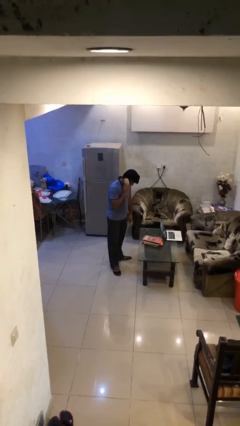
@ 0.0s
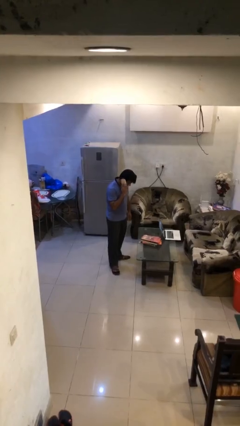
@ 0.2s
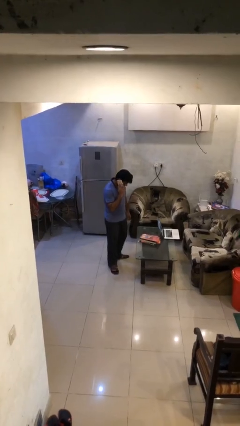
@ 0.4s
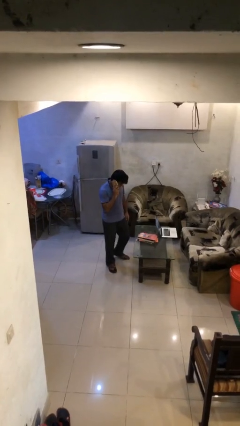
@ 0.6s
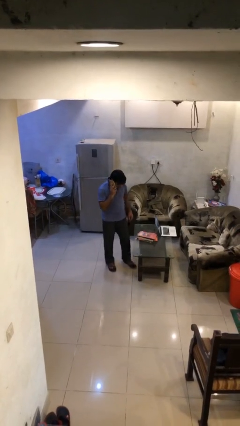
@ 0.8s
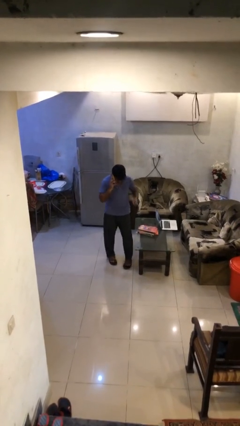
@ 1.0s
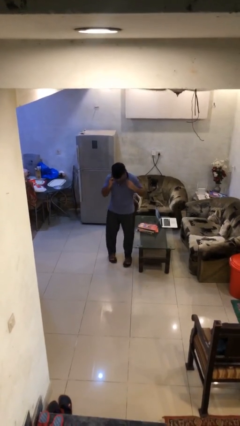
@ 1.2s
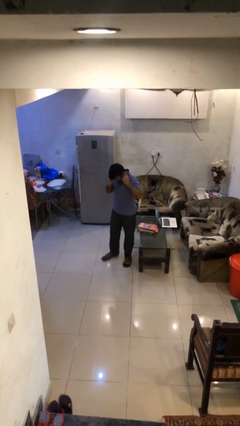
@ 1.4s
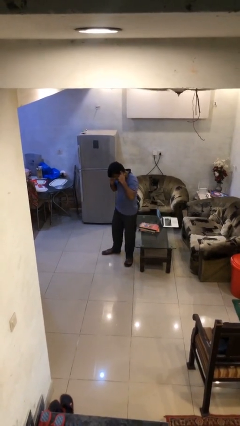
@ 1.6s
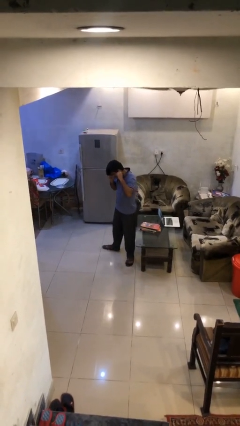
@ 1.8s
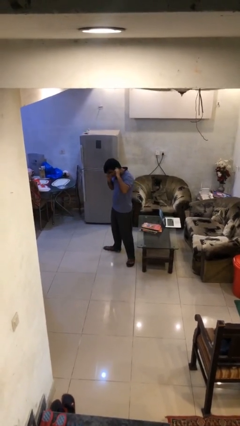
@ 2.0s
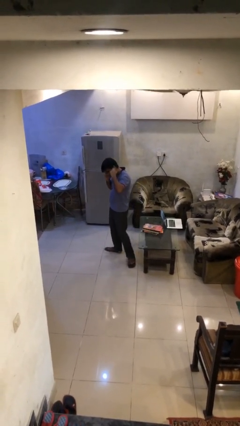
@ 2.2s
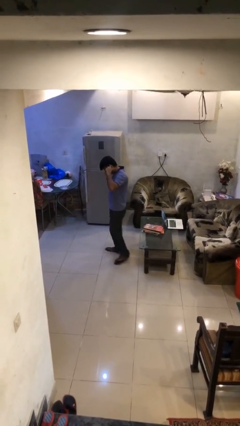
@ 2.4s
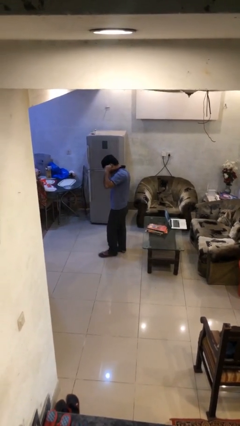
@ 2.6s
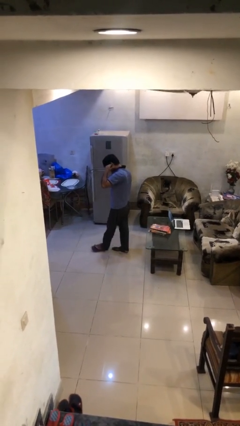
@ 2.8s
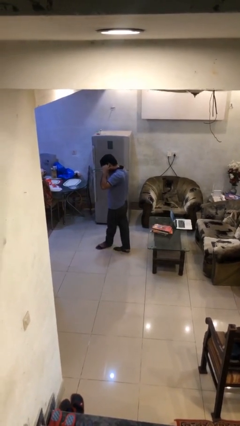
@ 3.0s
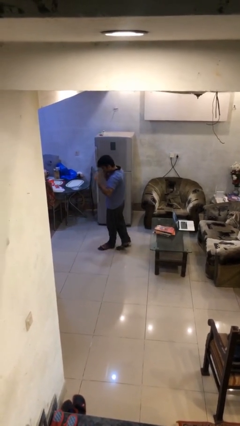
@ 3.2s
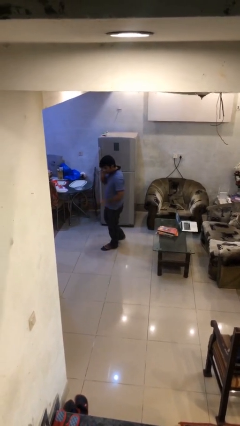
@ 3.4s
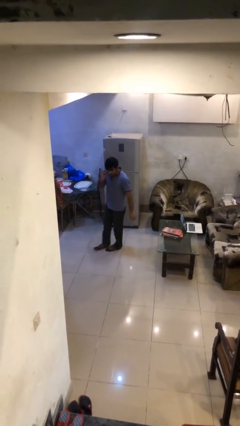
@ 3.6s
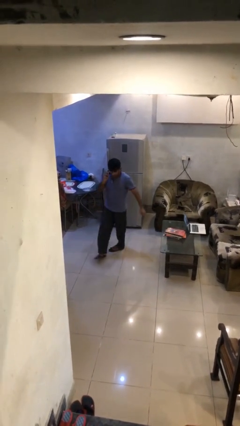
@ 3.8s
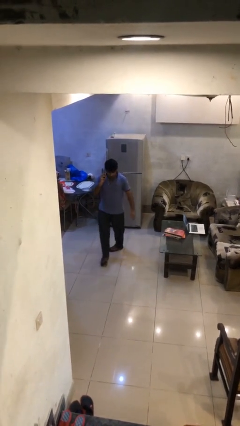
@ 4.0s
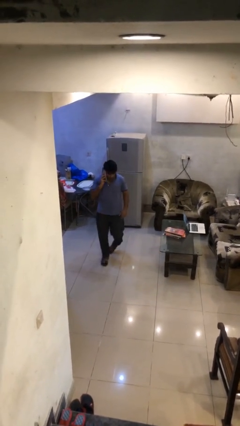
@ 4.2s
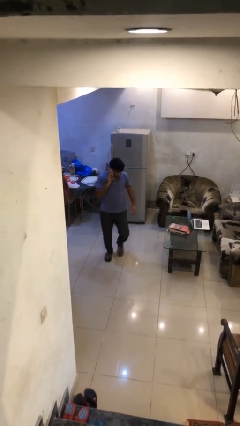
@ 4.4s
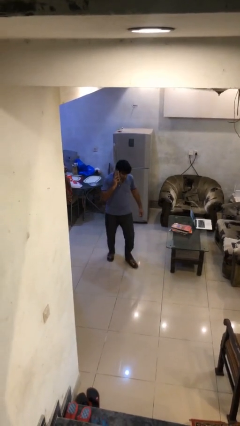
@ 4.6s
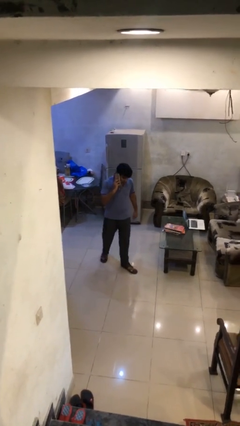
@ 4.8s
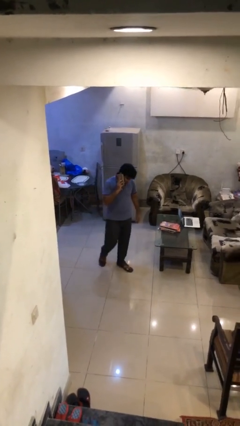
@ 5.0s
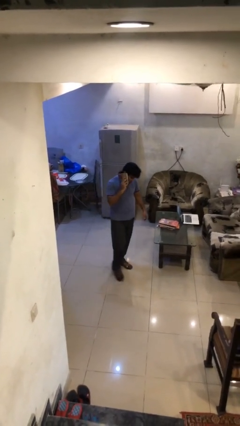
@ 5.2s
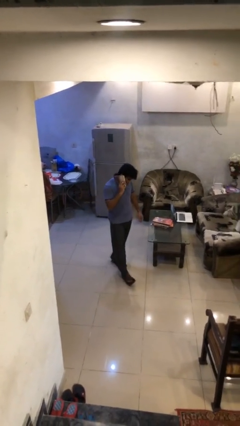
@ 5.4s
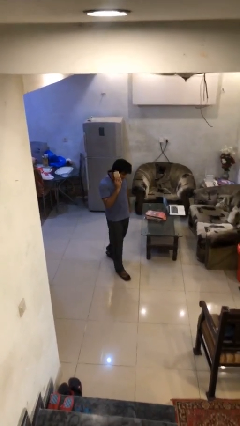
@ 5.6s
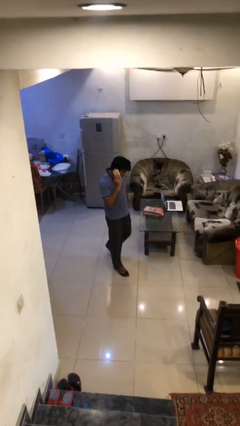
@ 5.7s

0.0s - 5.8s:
person talks on phone

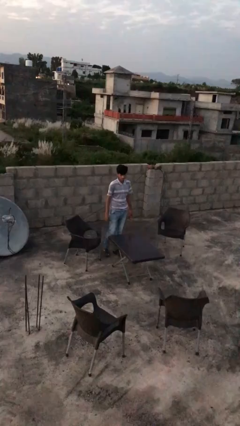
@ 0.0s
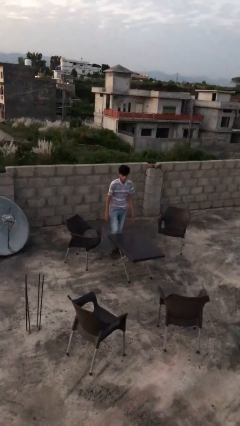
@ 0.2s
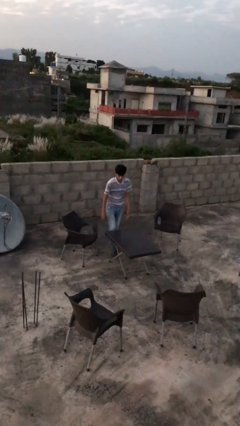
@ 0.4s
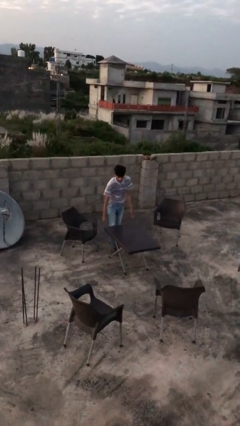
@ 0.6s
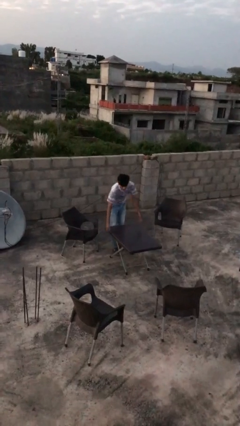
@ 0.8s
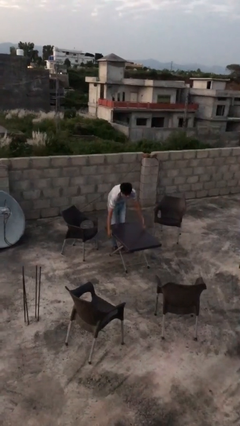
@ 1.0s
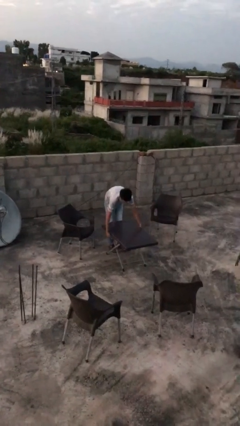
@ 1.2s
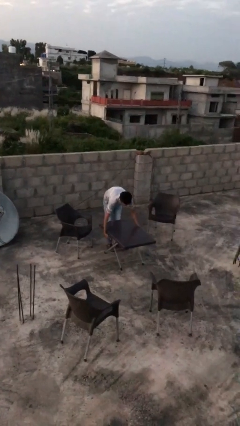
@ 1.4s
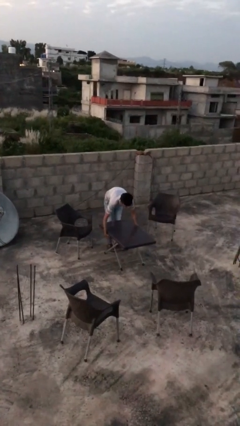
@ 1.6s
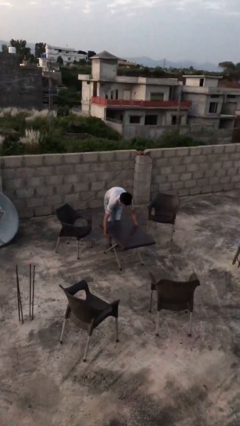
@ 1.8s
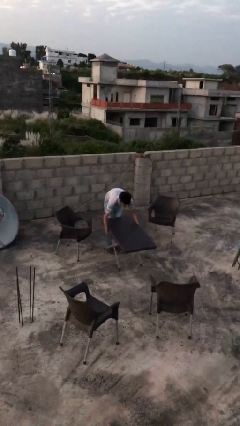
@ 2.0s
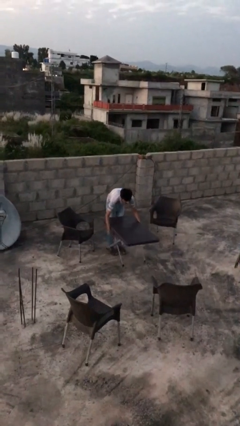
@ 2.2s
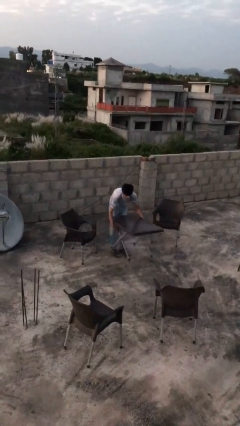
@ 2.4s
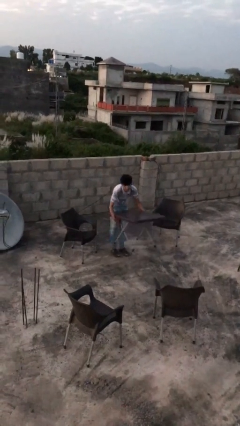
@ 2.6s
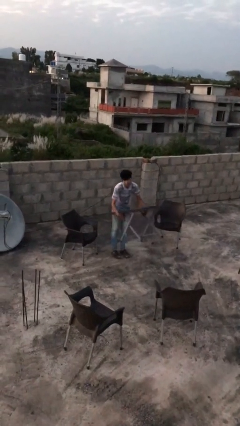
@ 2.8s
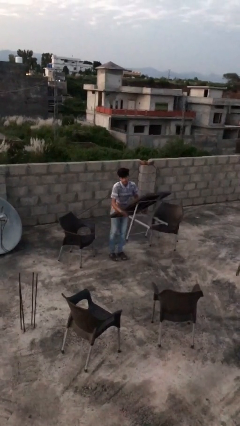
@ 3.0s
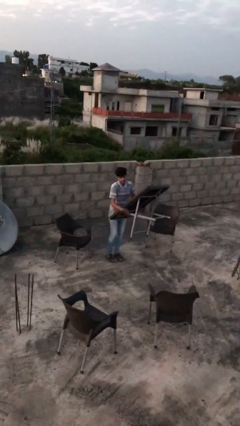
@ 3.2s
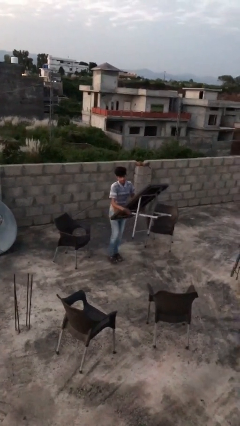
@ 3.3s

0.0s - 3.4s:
person picks up object from floor

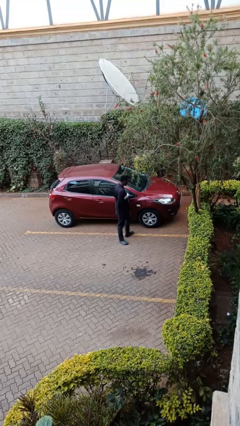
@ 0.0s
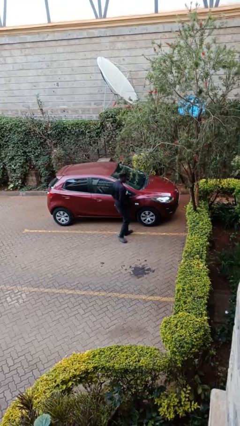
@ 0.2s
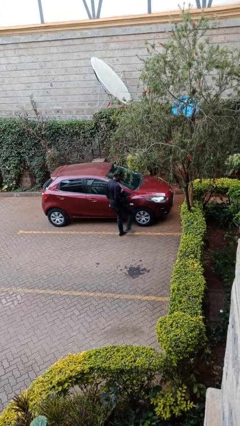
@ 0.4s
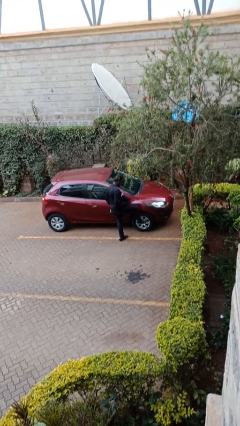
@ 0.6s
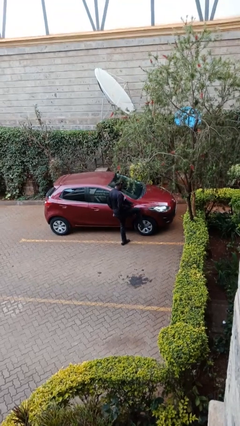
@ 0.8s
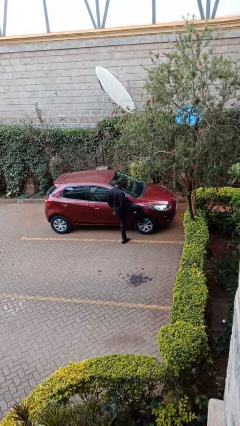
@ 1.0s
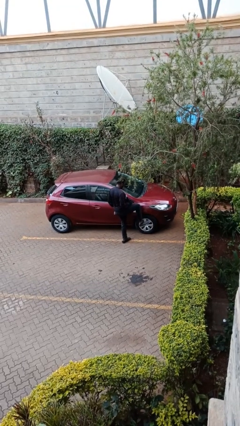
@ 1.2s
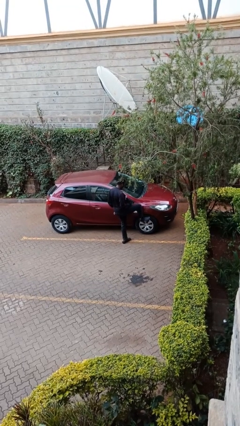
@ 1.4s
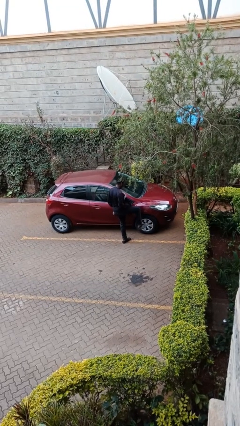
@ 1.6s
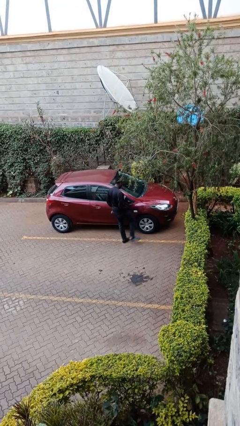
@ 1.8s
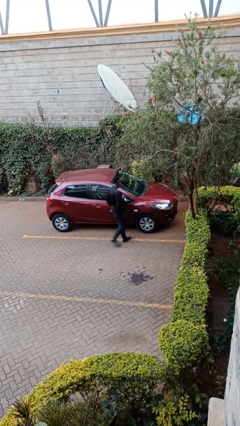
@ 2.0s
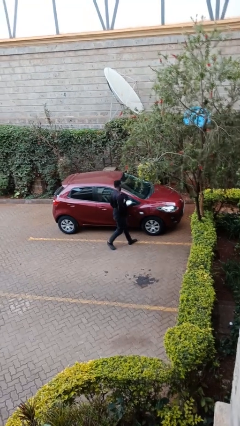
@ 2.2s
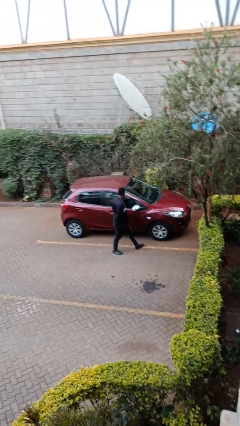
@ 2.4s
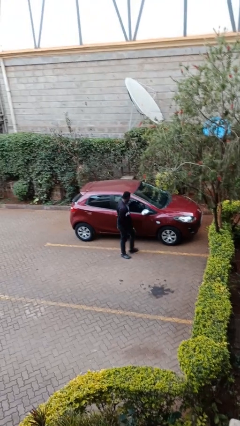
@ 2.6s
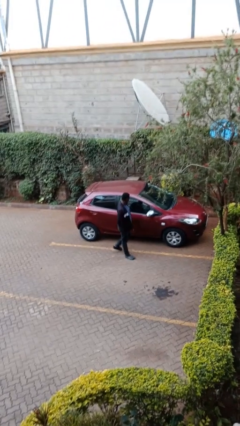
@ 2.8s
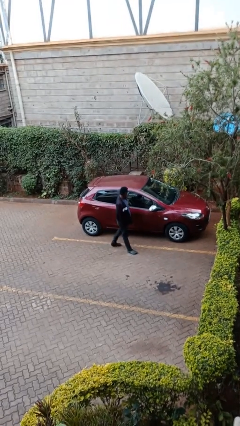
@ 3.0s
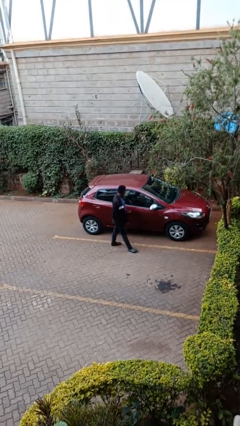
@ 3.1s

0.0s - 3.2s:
person kicks car tires

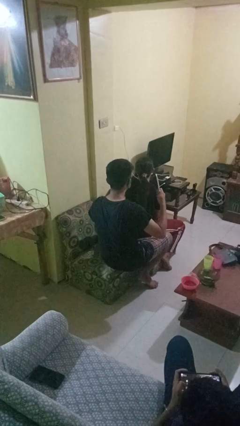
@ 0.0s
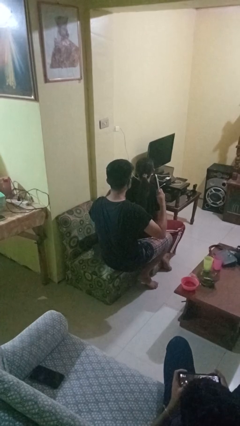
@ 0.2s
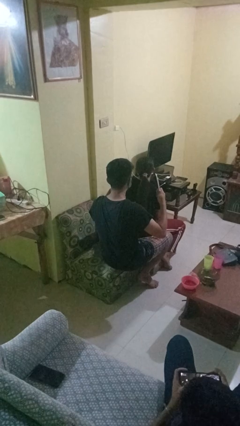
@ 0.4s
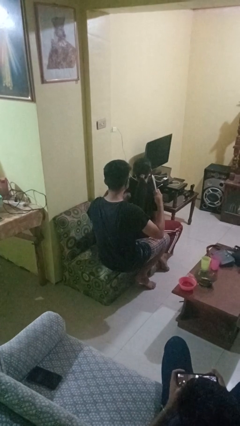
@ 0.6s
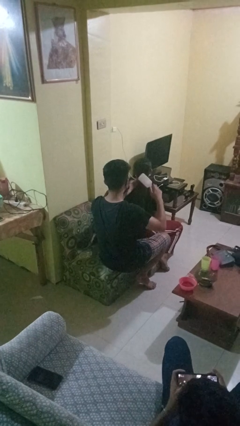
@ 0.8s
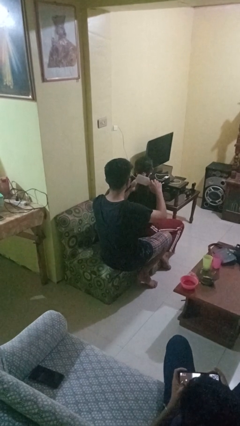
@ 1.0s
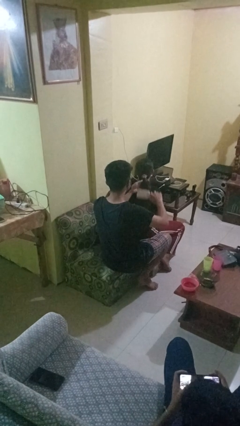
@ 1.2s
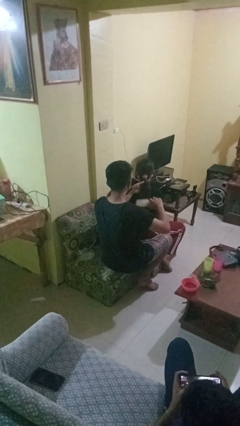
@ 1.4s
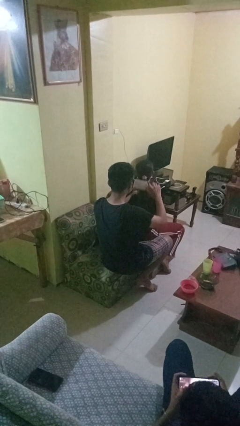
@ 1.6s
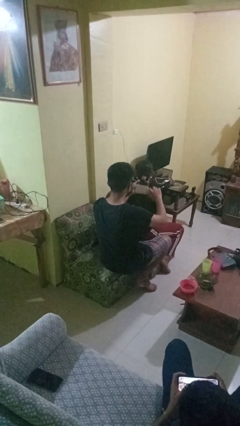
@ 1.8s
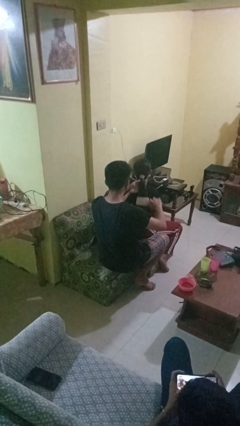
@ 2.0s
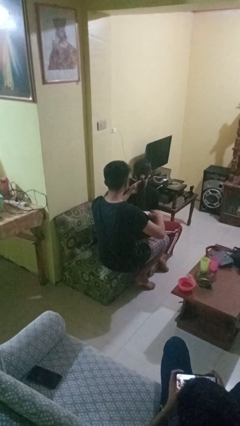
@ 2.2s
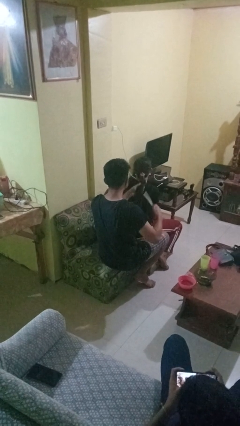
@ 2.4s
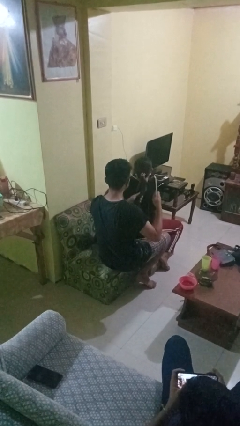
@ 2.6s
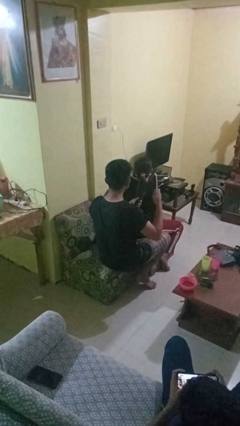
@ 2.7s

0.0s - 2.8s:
person brushes hair of person

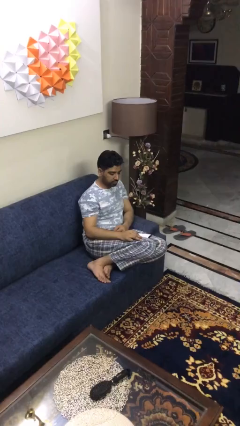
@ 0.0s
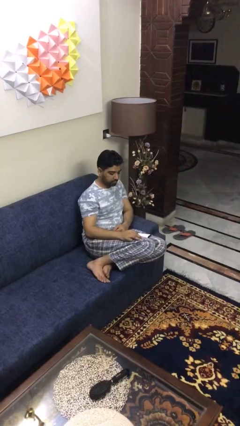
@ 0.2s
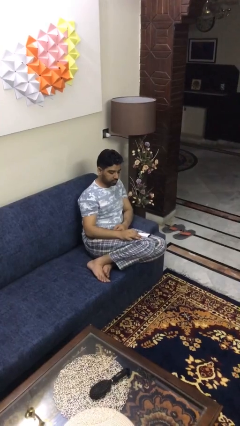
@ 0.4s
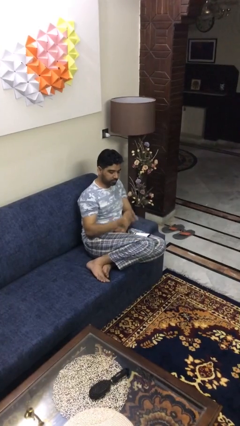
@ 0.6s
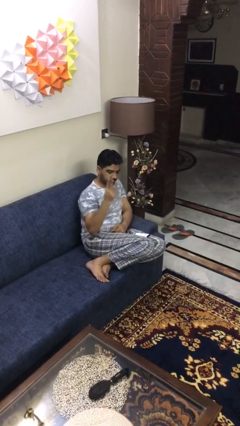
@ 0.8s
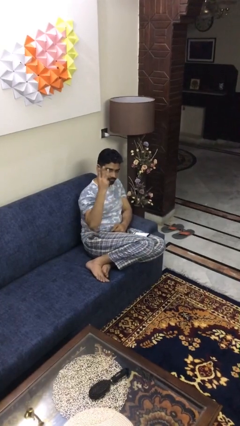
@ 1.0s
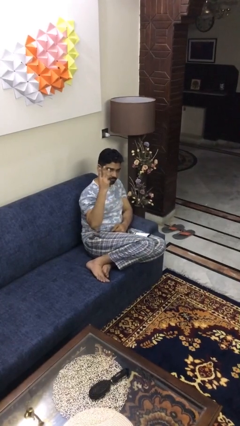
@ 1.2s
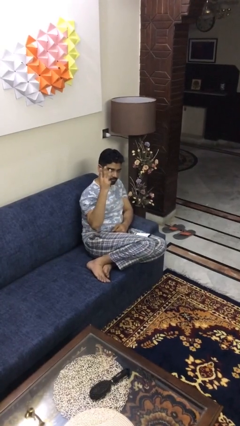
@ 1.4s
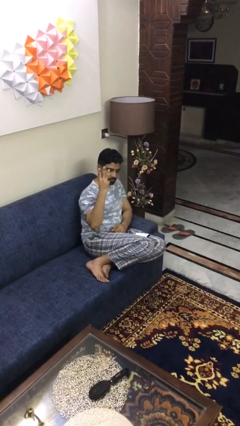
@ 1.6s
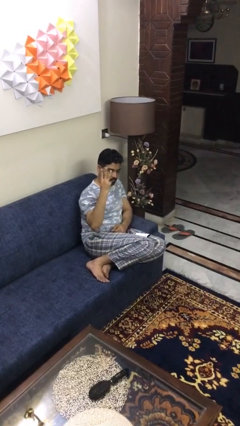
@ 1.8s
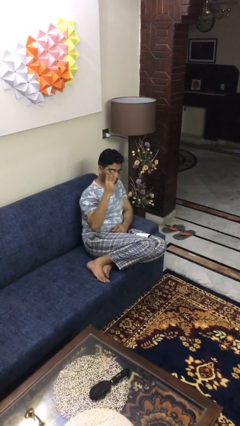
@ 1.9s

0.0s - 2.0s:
person gestures number three
